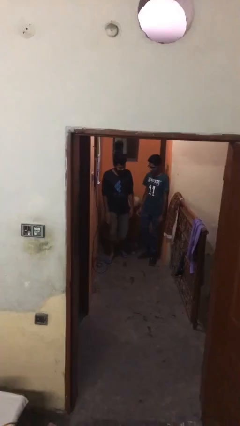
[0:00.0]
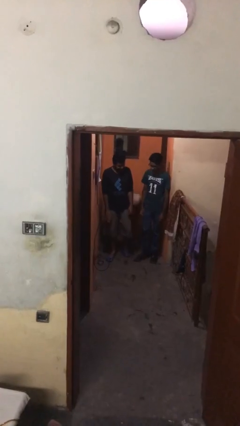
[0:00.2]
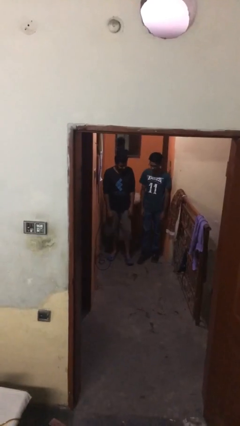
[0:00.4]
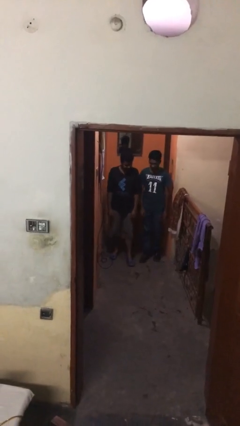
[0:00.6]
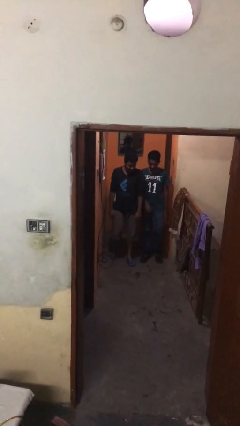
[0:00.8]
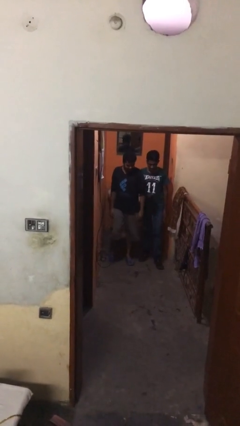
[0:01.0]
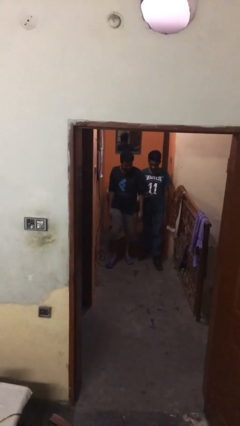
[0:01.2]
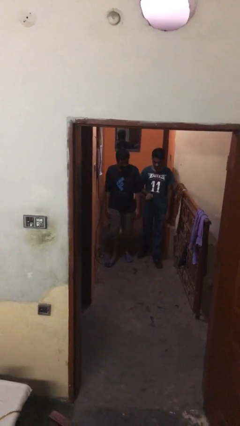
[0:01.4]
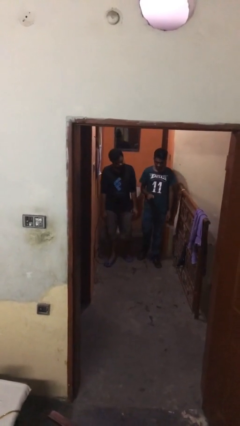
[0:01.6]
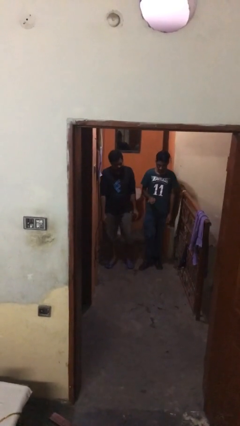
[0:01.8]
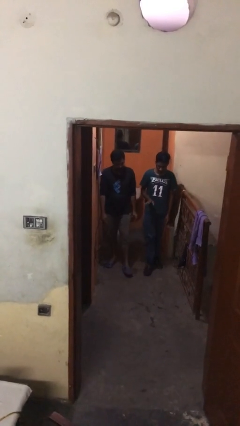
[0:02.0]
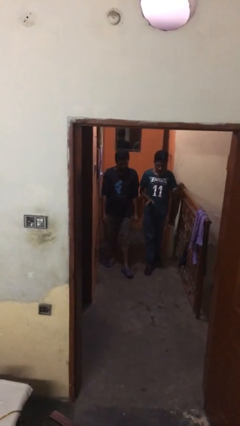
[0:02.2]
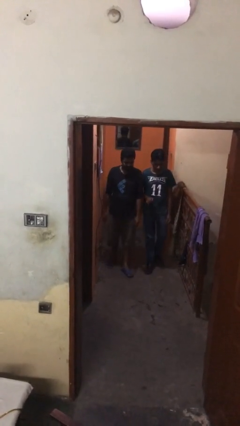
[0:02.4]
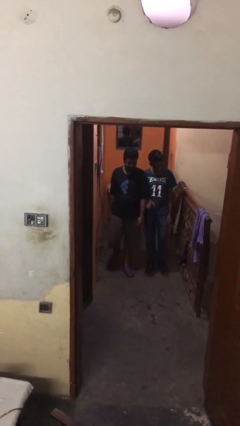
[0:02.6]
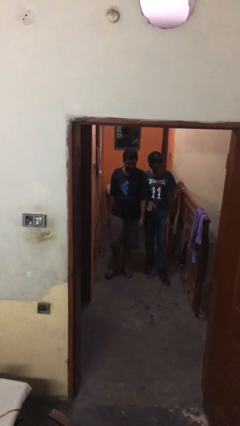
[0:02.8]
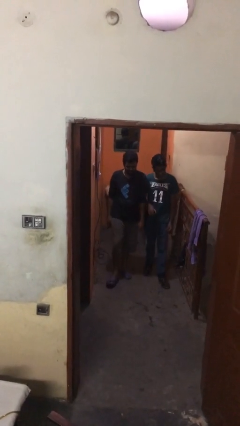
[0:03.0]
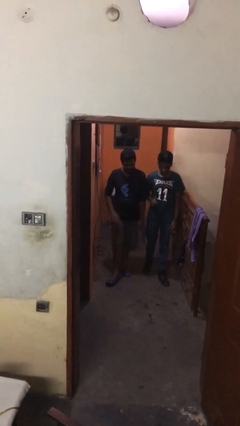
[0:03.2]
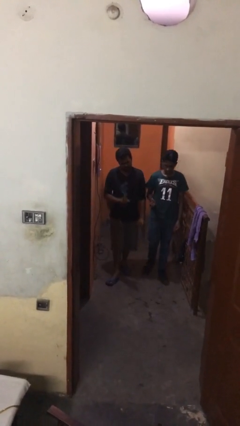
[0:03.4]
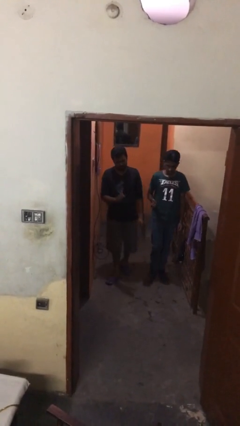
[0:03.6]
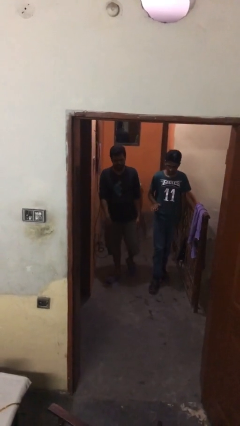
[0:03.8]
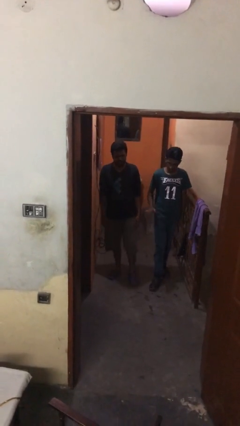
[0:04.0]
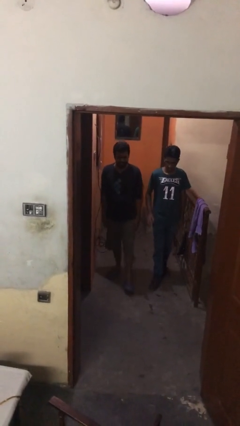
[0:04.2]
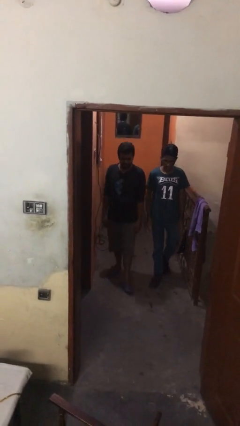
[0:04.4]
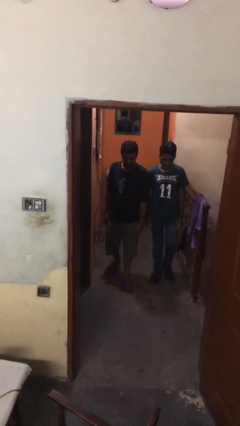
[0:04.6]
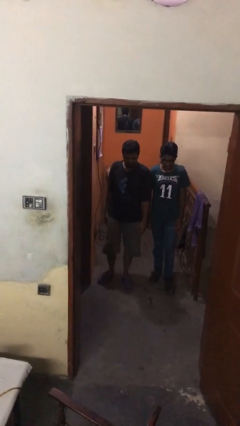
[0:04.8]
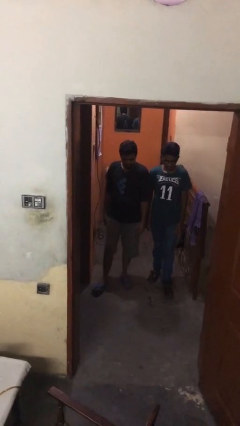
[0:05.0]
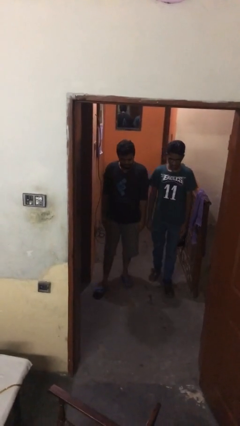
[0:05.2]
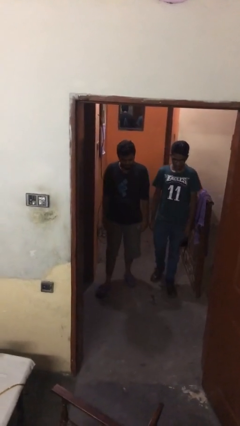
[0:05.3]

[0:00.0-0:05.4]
person talks to person

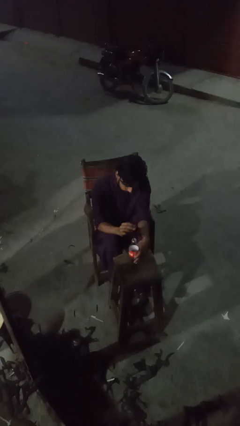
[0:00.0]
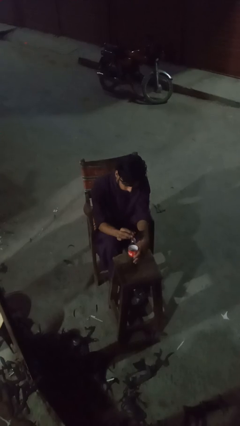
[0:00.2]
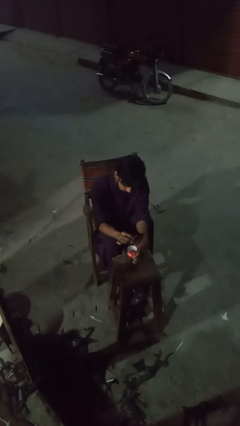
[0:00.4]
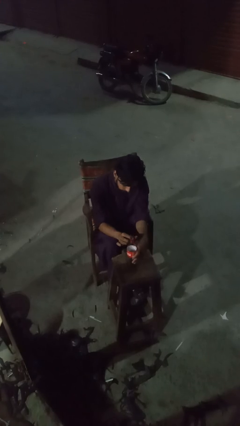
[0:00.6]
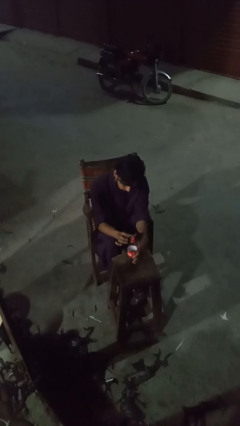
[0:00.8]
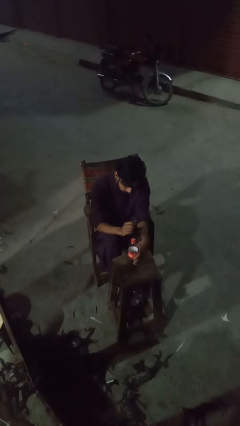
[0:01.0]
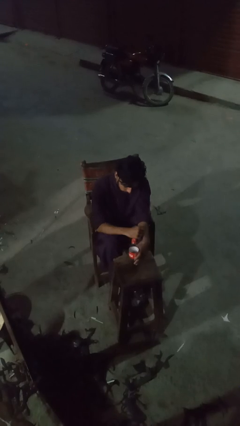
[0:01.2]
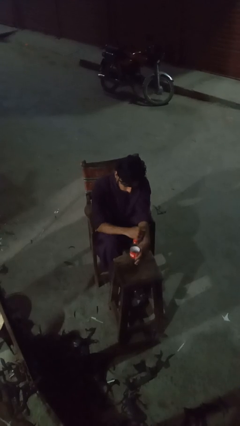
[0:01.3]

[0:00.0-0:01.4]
person screws lid to bottle

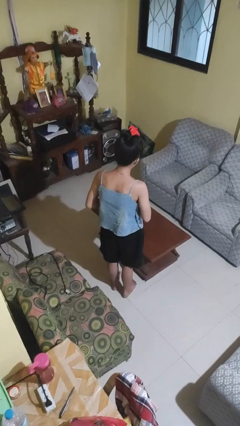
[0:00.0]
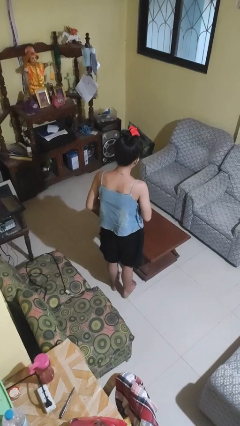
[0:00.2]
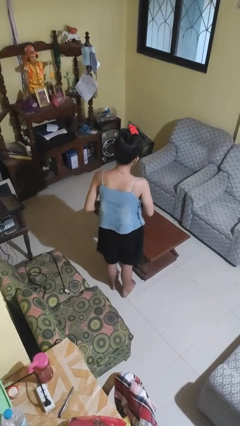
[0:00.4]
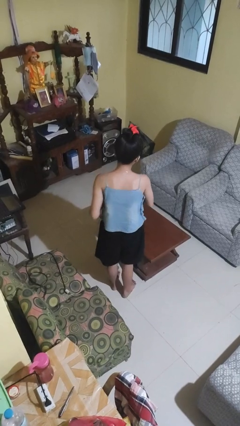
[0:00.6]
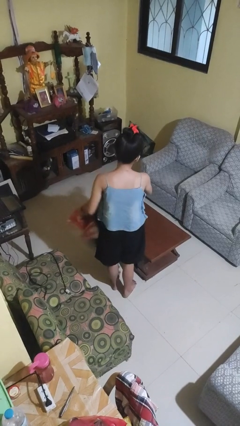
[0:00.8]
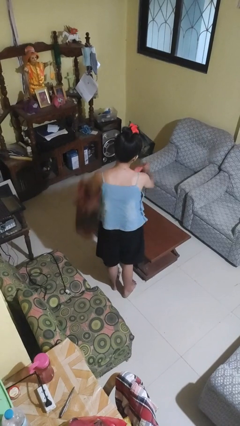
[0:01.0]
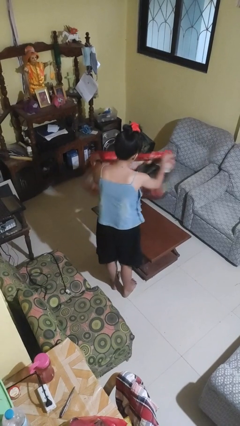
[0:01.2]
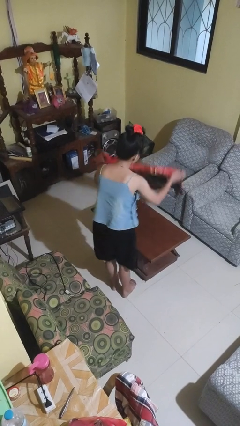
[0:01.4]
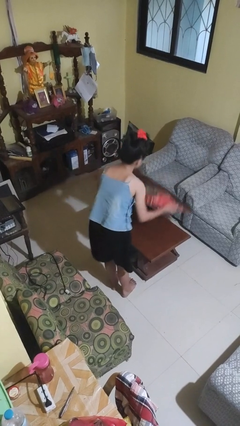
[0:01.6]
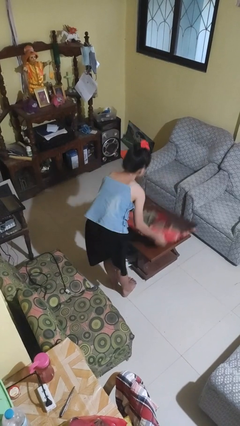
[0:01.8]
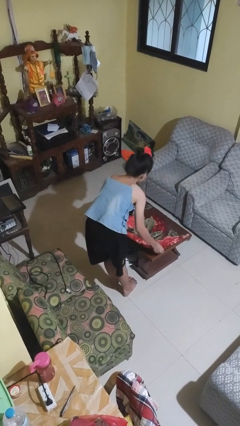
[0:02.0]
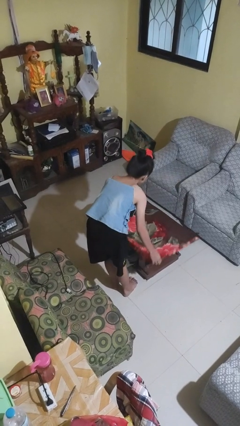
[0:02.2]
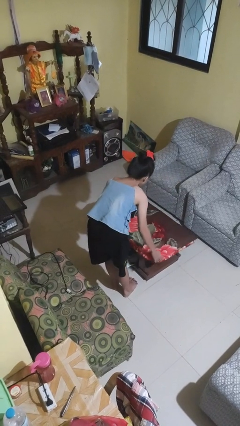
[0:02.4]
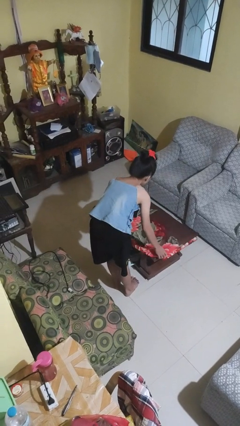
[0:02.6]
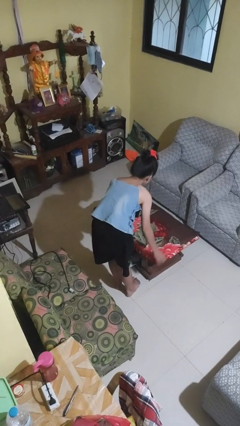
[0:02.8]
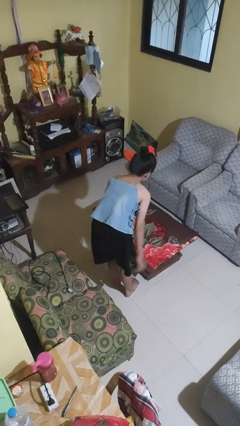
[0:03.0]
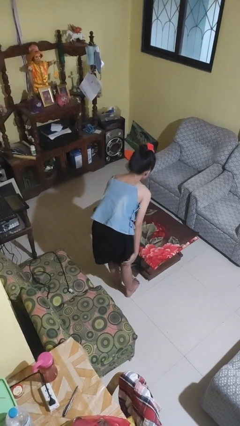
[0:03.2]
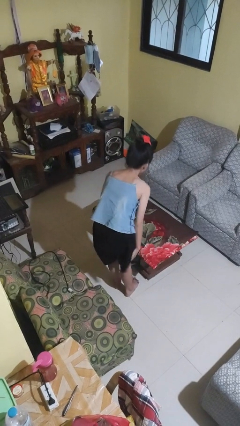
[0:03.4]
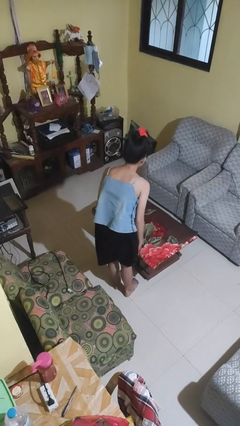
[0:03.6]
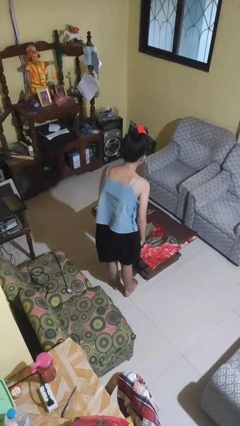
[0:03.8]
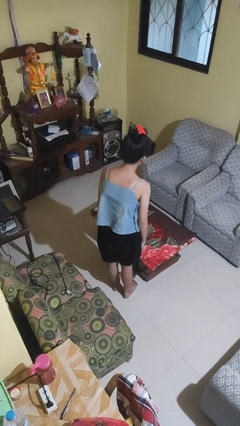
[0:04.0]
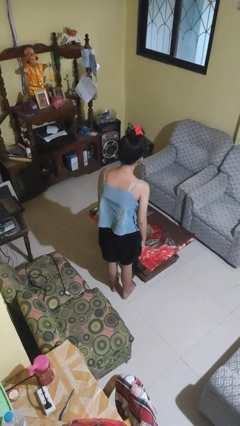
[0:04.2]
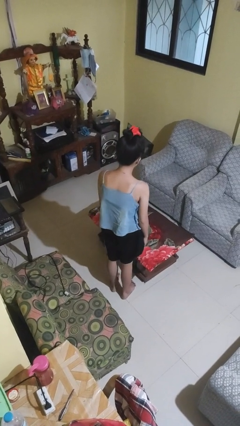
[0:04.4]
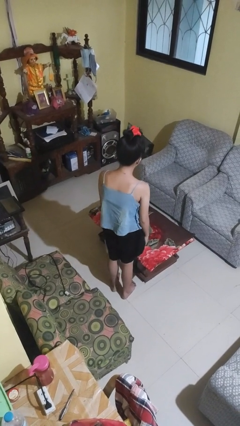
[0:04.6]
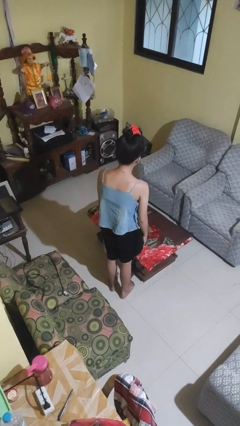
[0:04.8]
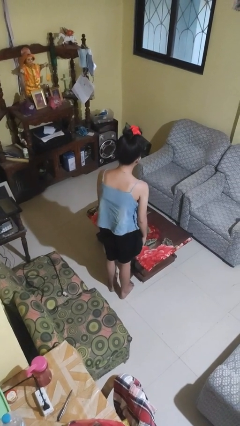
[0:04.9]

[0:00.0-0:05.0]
person spreads tablecloth

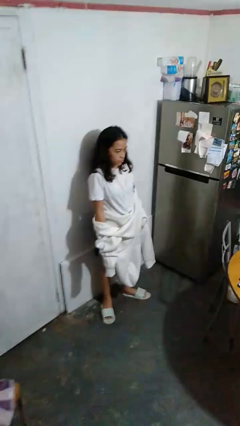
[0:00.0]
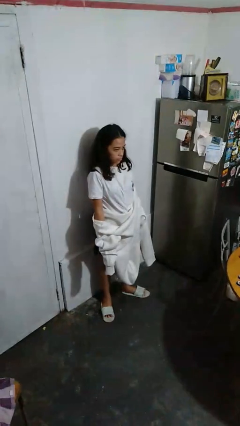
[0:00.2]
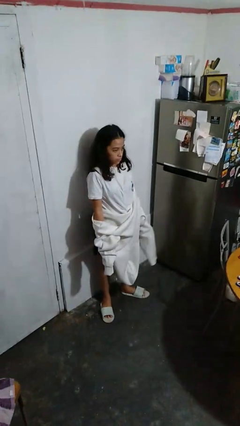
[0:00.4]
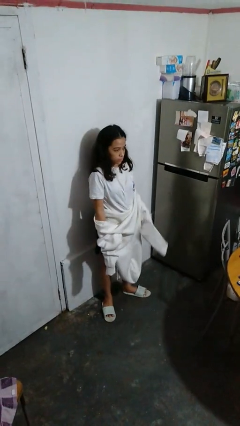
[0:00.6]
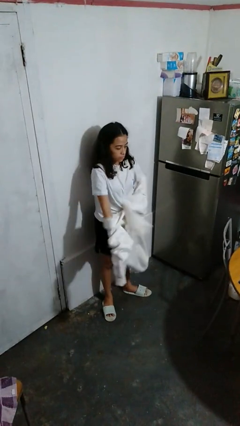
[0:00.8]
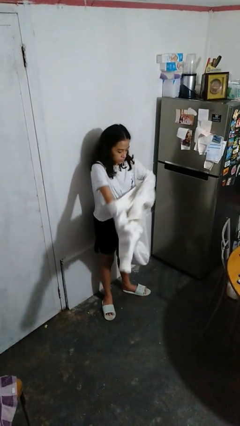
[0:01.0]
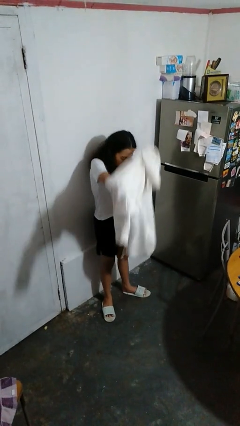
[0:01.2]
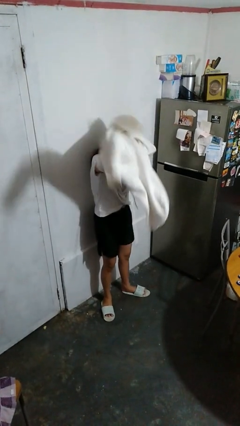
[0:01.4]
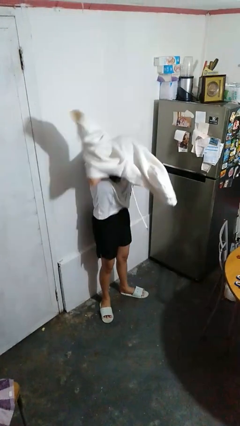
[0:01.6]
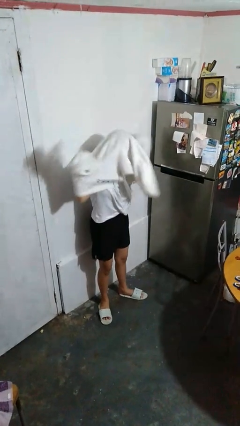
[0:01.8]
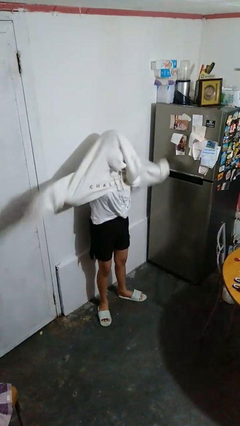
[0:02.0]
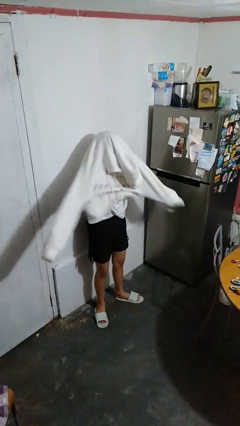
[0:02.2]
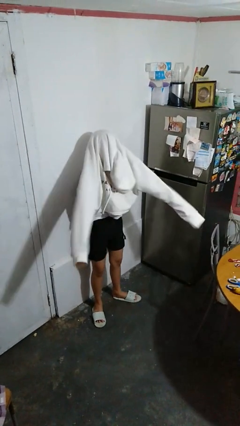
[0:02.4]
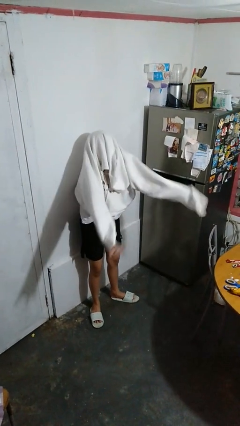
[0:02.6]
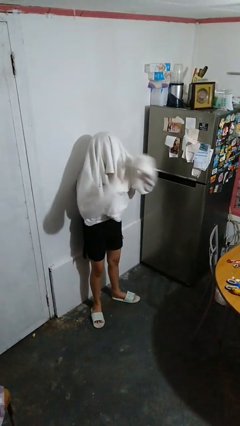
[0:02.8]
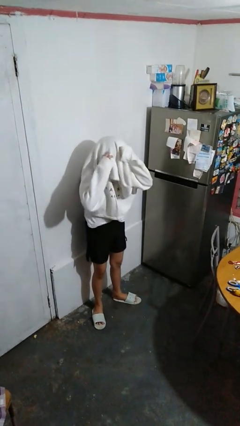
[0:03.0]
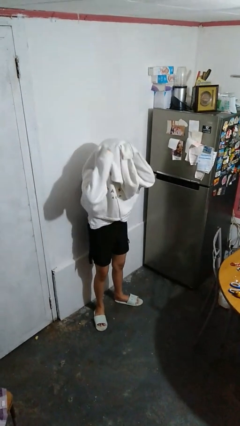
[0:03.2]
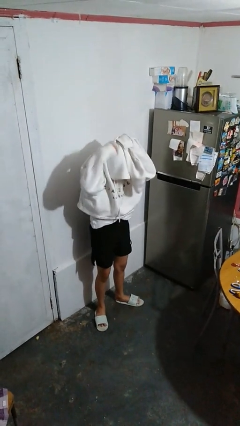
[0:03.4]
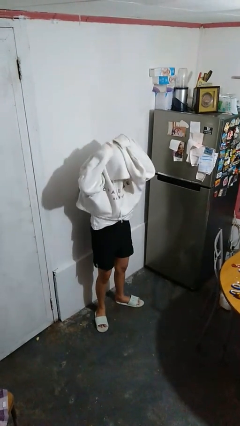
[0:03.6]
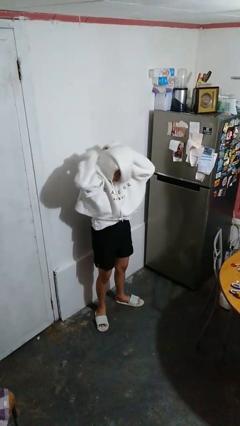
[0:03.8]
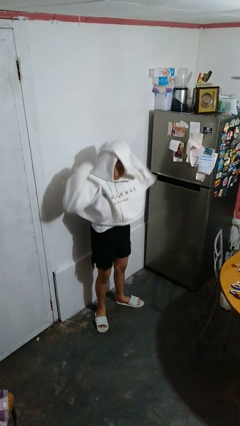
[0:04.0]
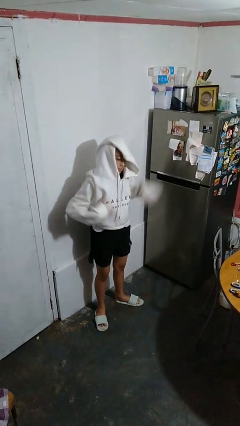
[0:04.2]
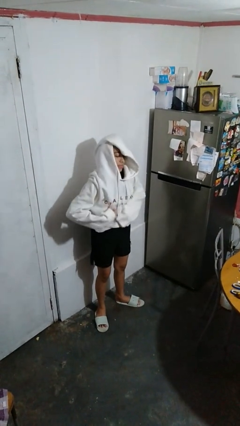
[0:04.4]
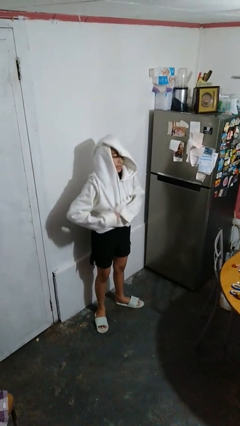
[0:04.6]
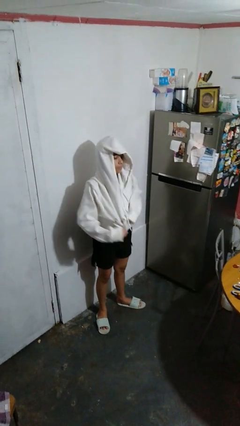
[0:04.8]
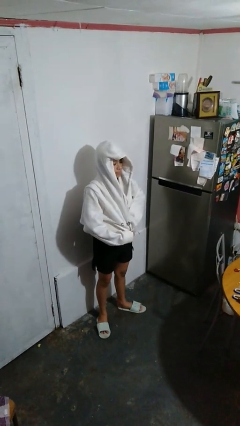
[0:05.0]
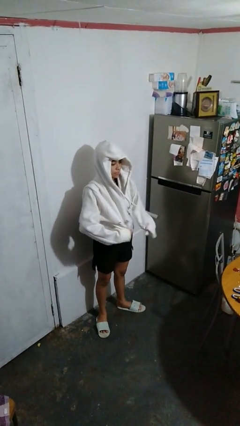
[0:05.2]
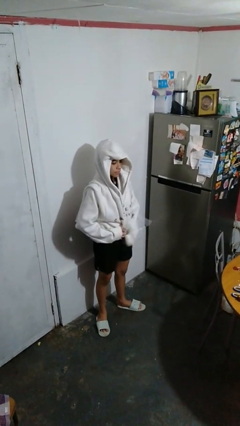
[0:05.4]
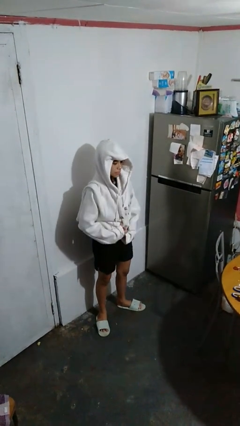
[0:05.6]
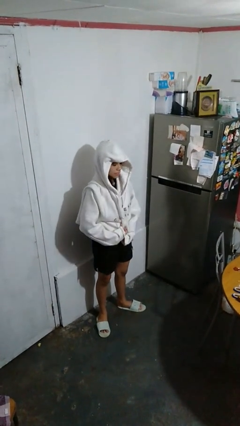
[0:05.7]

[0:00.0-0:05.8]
person puts on hoodie

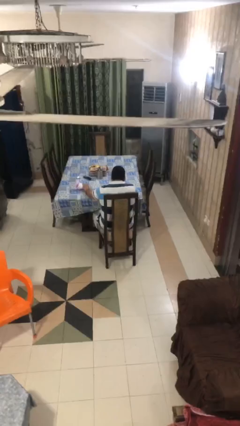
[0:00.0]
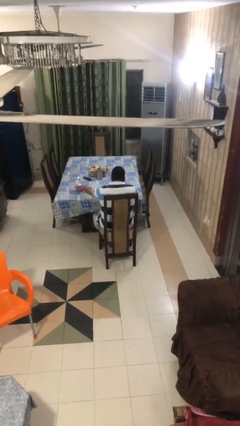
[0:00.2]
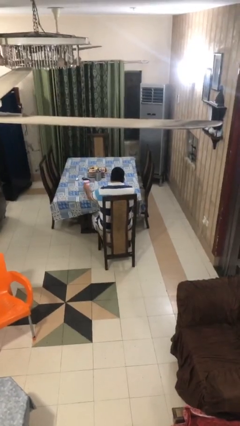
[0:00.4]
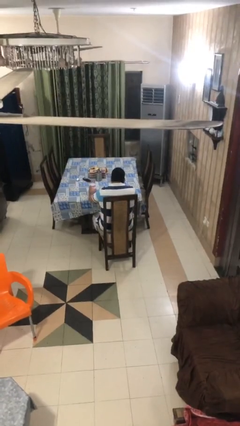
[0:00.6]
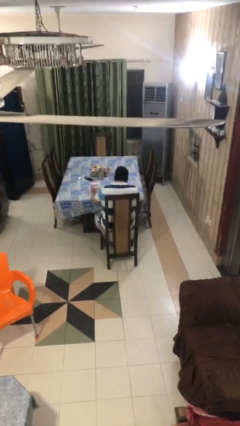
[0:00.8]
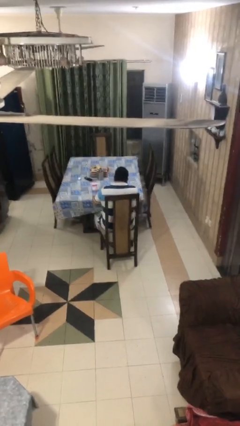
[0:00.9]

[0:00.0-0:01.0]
person sets upright glass
